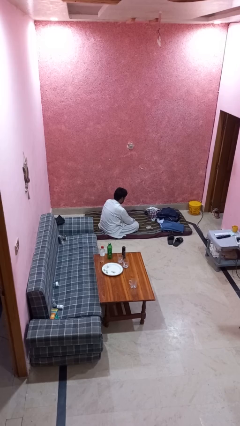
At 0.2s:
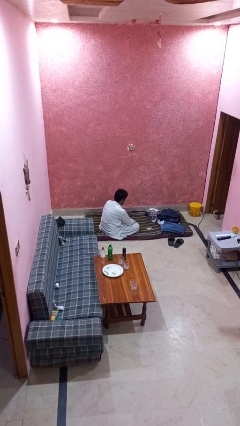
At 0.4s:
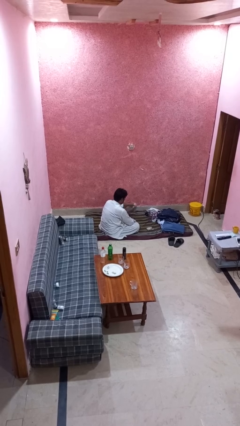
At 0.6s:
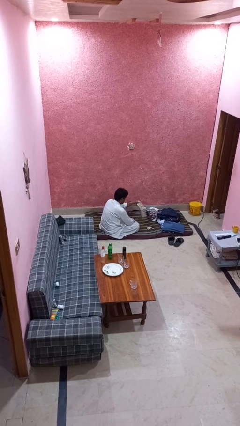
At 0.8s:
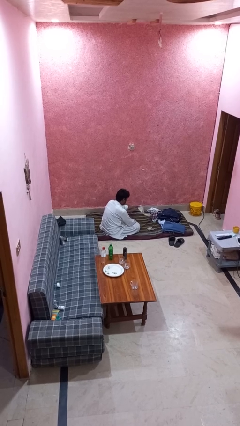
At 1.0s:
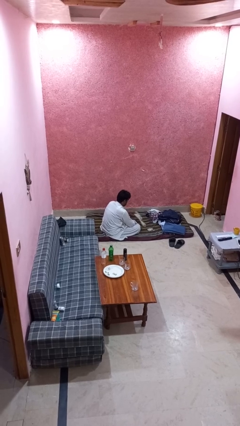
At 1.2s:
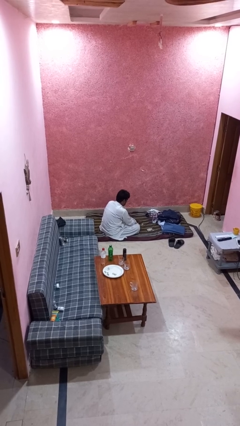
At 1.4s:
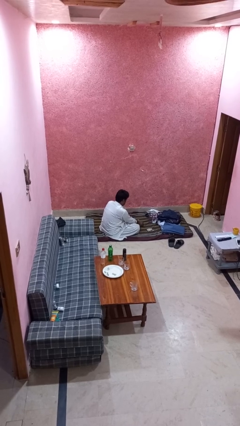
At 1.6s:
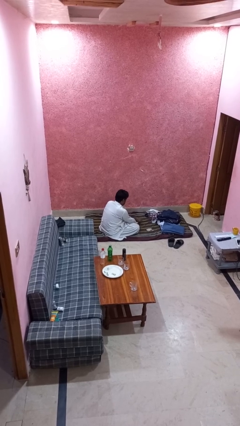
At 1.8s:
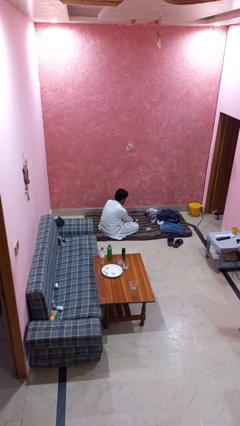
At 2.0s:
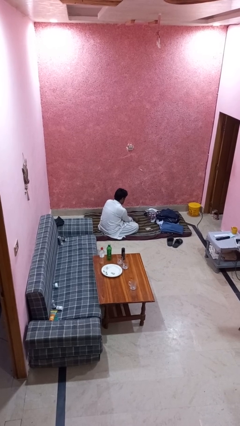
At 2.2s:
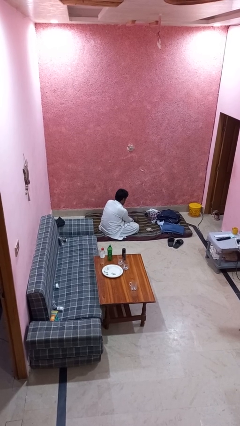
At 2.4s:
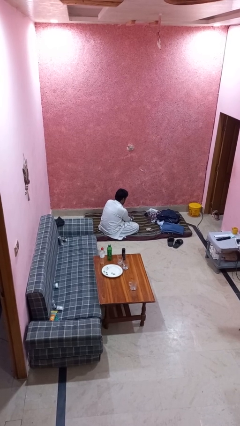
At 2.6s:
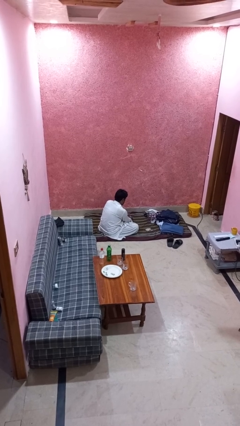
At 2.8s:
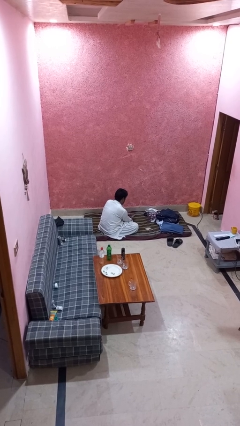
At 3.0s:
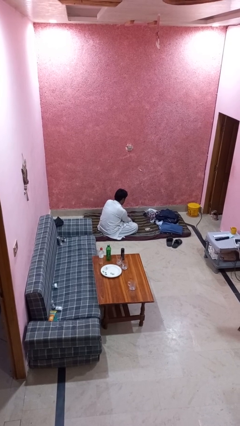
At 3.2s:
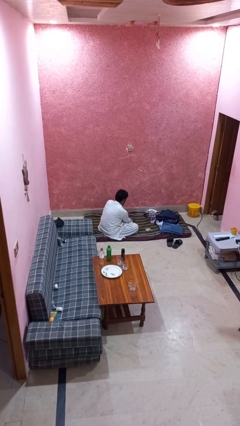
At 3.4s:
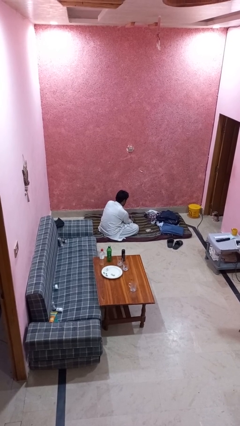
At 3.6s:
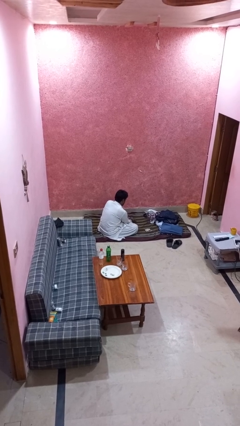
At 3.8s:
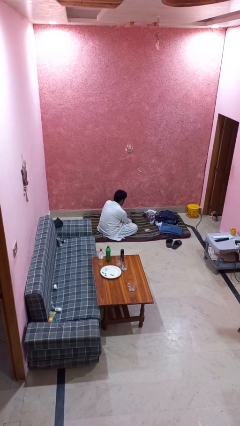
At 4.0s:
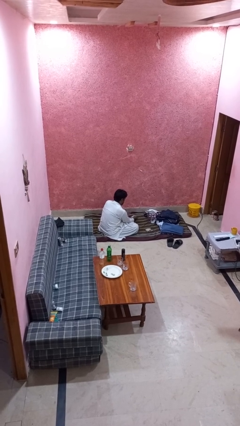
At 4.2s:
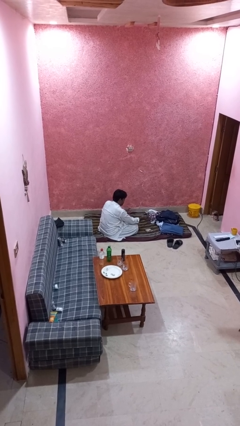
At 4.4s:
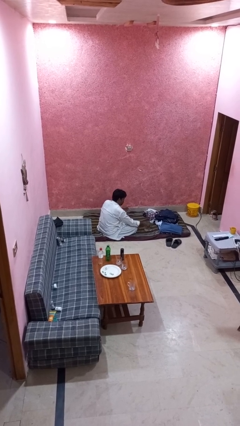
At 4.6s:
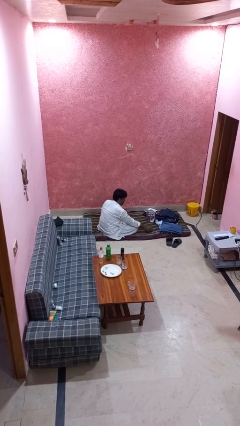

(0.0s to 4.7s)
person folds socks

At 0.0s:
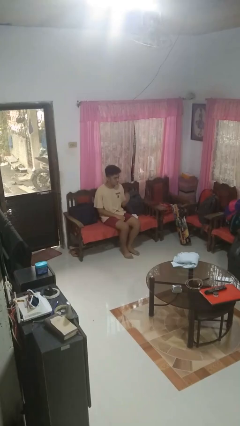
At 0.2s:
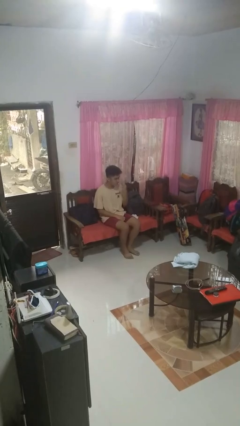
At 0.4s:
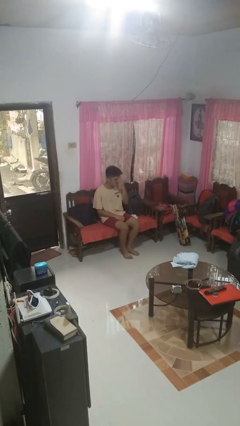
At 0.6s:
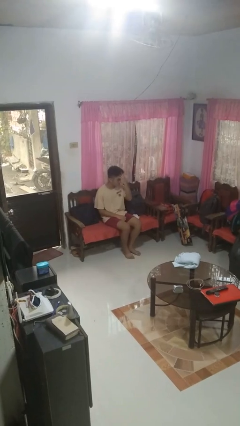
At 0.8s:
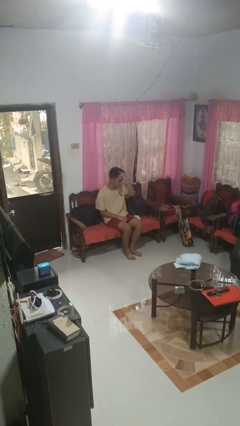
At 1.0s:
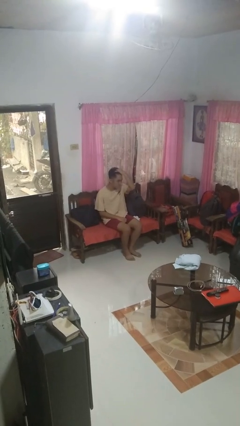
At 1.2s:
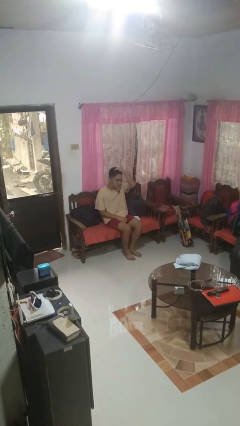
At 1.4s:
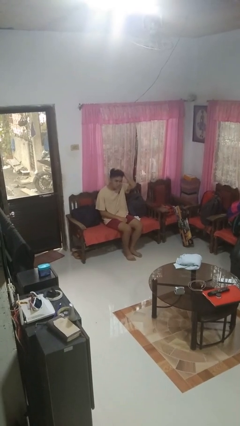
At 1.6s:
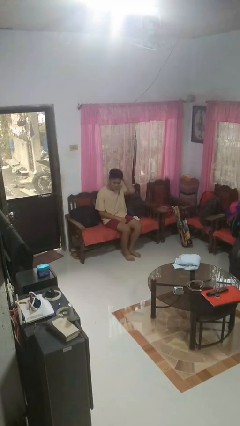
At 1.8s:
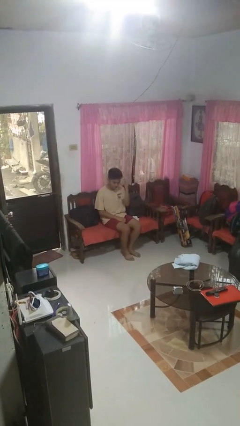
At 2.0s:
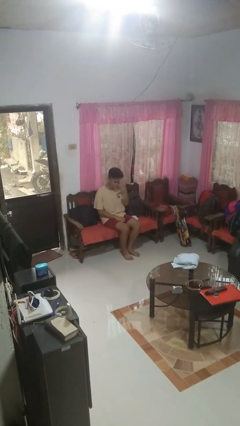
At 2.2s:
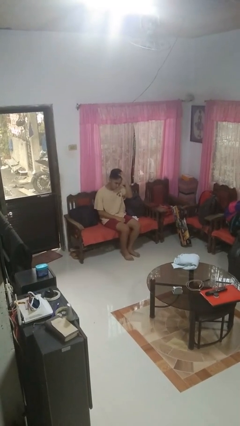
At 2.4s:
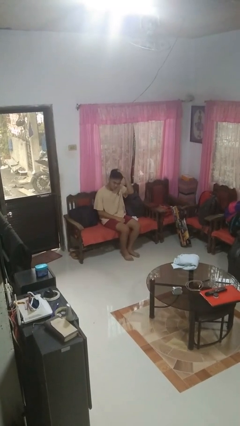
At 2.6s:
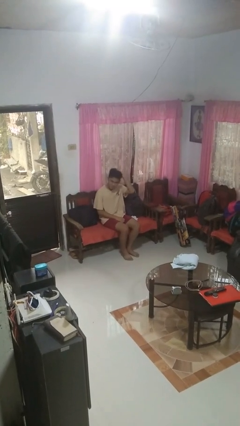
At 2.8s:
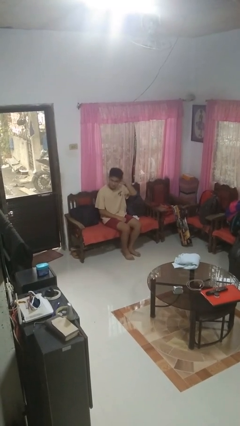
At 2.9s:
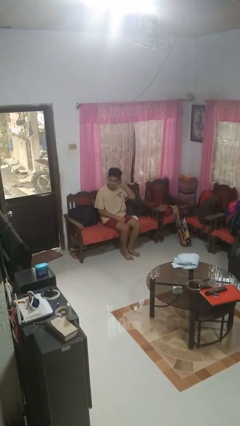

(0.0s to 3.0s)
person strokes hair

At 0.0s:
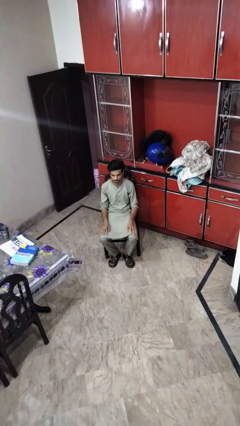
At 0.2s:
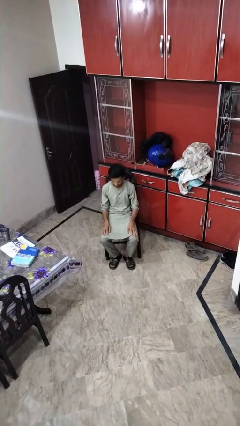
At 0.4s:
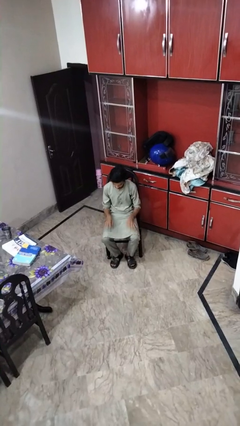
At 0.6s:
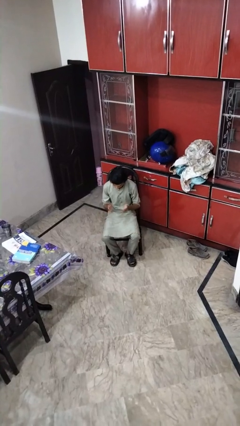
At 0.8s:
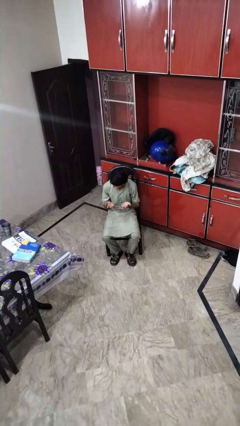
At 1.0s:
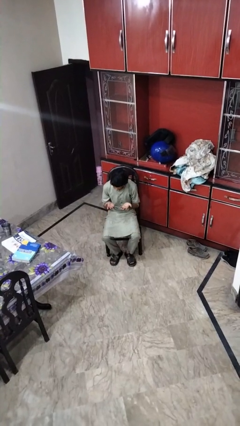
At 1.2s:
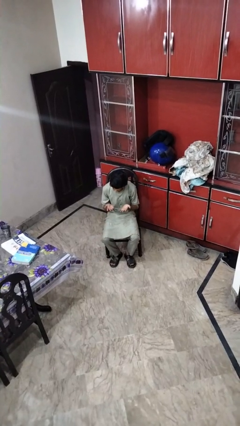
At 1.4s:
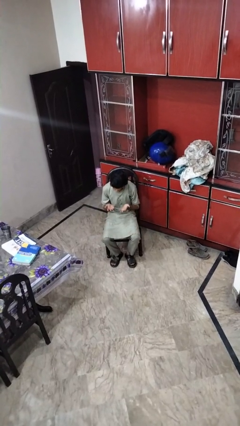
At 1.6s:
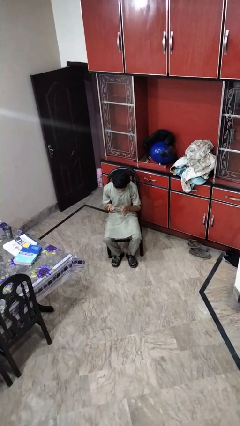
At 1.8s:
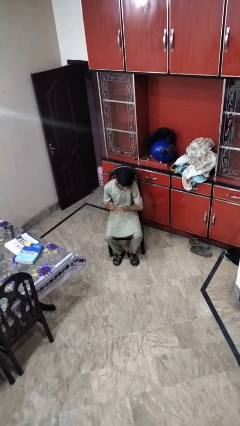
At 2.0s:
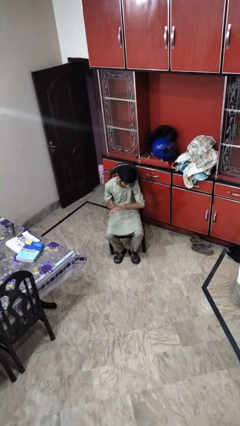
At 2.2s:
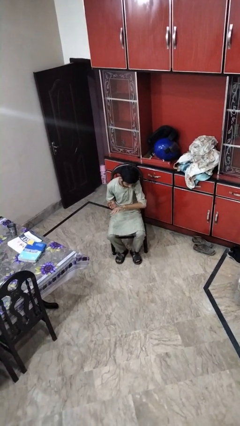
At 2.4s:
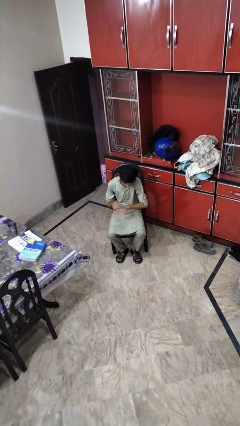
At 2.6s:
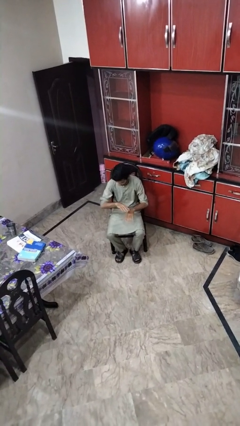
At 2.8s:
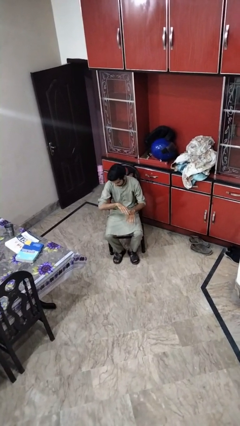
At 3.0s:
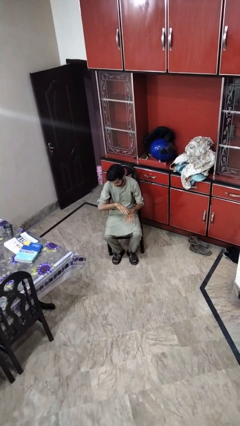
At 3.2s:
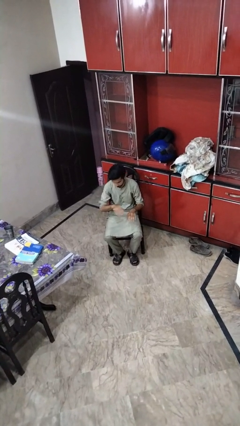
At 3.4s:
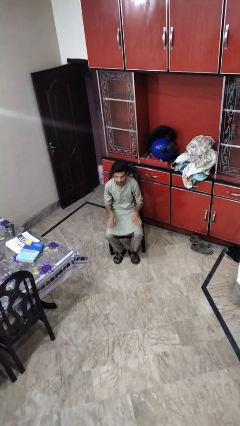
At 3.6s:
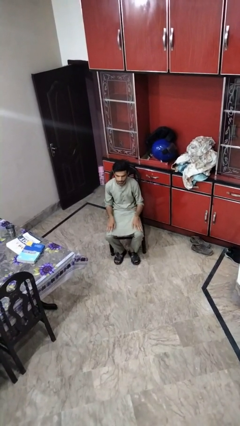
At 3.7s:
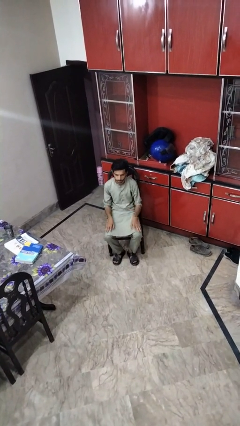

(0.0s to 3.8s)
person looks at hands in lap

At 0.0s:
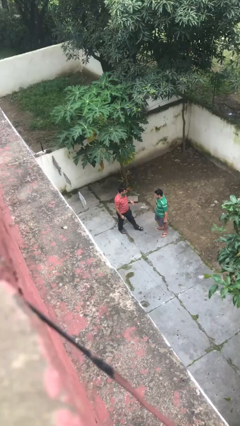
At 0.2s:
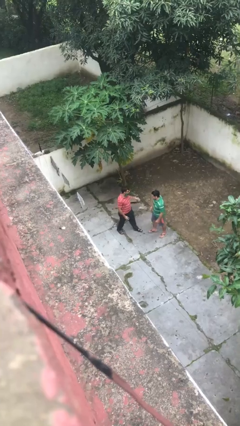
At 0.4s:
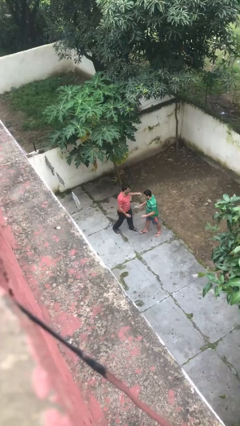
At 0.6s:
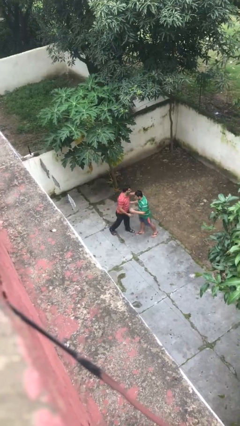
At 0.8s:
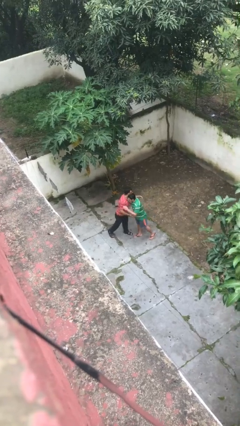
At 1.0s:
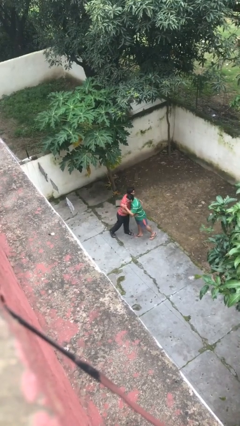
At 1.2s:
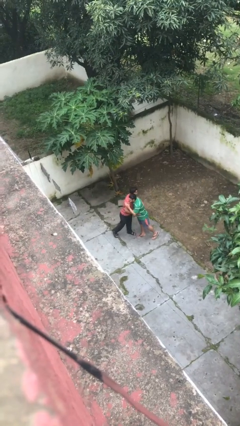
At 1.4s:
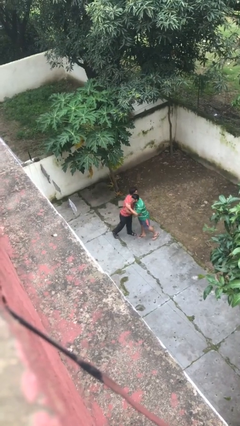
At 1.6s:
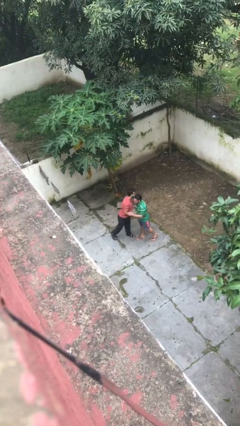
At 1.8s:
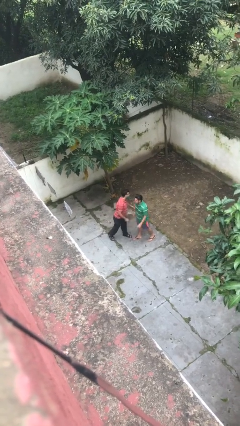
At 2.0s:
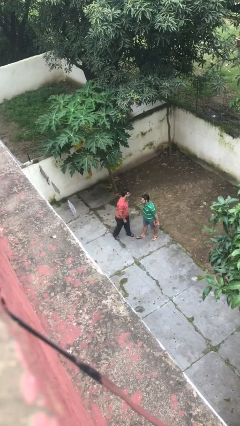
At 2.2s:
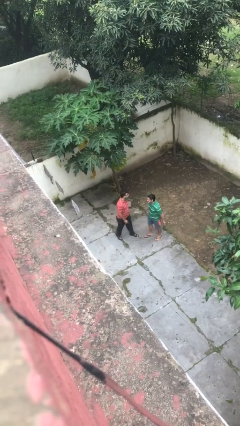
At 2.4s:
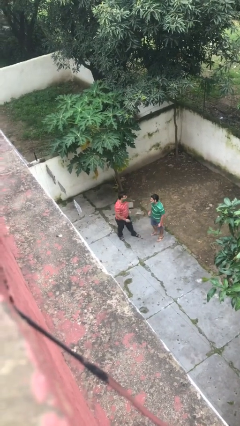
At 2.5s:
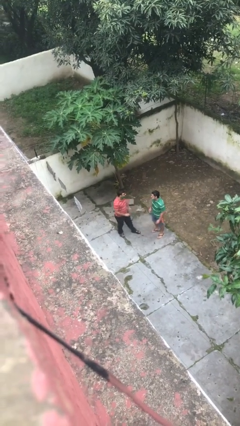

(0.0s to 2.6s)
person embraces person

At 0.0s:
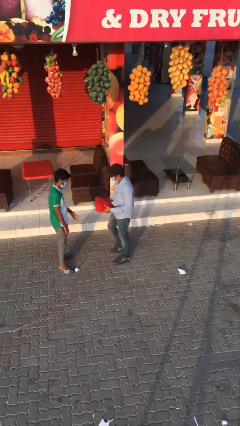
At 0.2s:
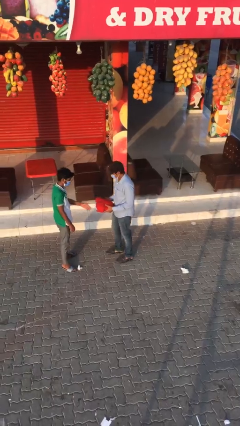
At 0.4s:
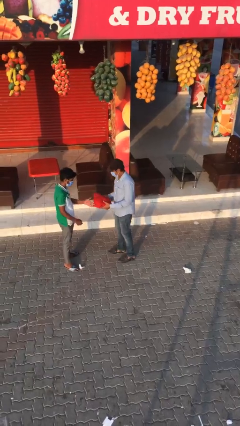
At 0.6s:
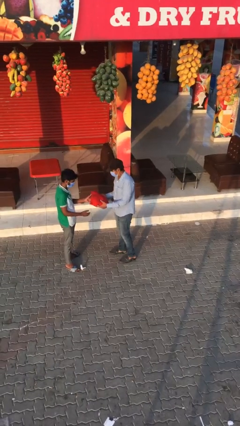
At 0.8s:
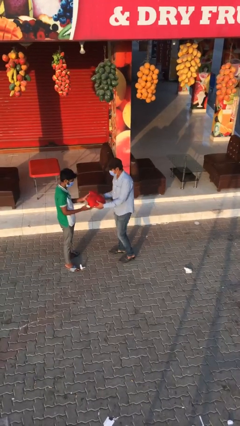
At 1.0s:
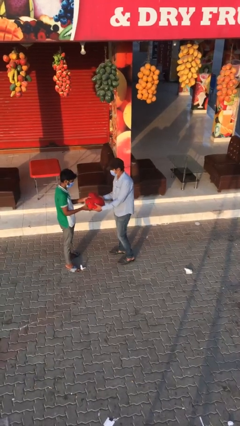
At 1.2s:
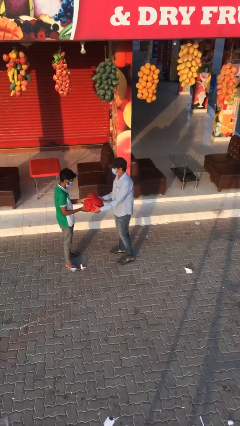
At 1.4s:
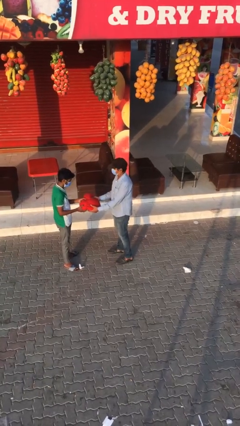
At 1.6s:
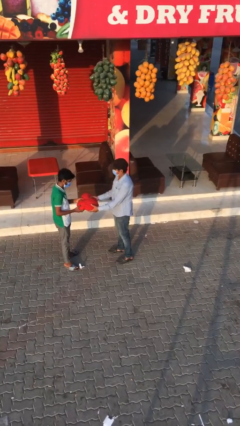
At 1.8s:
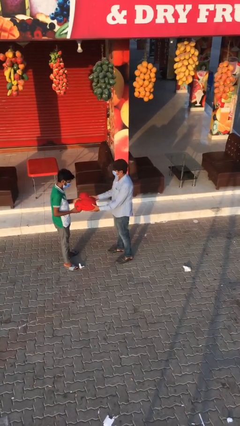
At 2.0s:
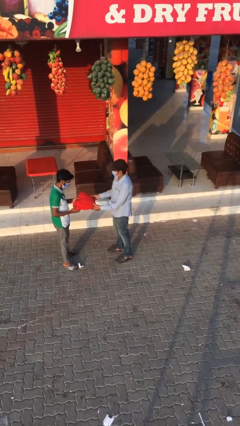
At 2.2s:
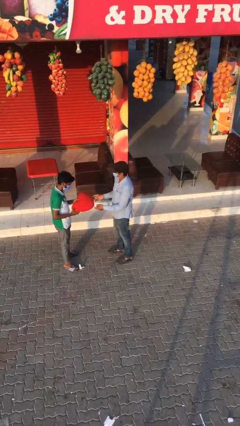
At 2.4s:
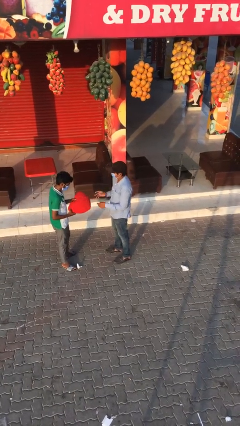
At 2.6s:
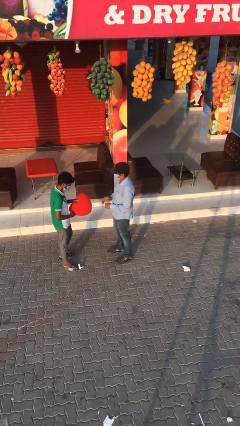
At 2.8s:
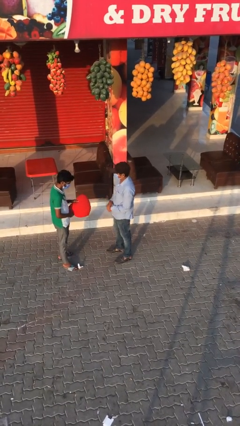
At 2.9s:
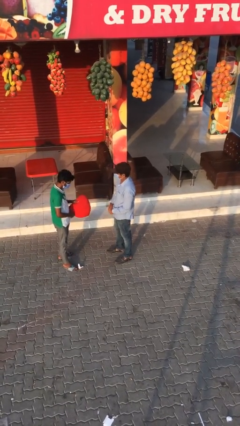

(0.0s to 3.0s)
person transfers object to person

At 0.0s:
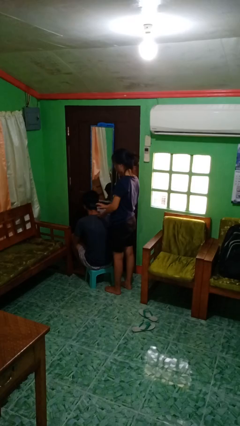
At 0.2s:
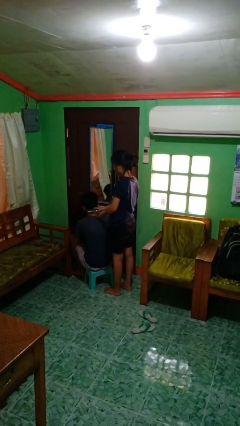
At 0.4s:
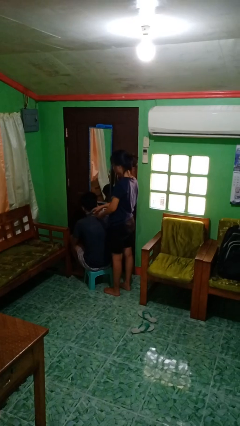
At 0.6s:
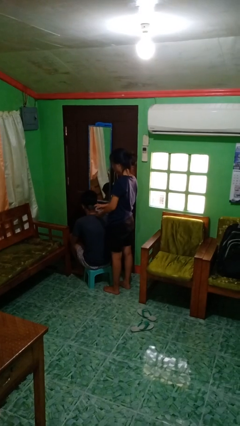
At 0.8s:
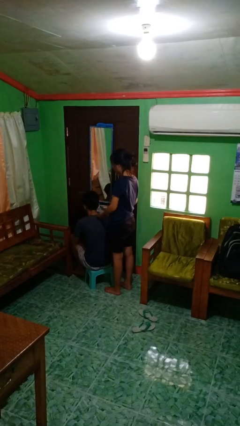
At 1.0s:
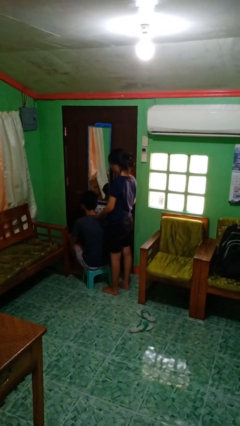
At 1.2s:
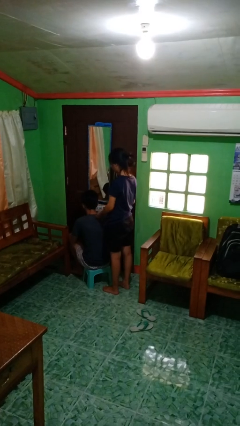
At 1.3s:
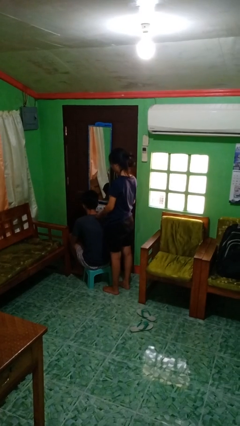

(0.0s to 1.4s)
person brushes hair of person
